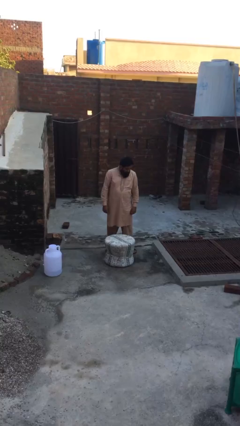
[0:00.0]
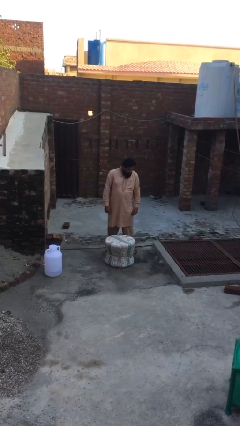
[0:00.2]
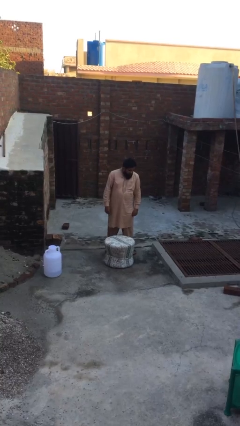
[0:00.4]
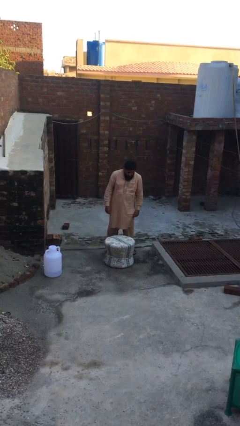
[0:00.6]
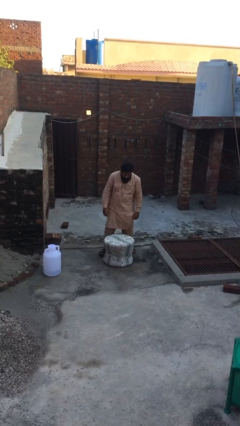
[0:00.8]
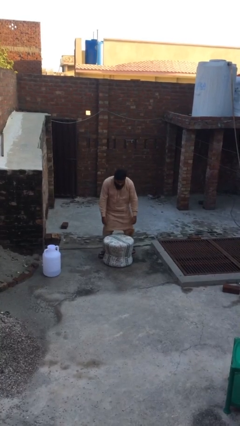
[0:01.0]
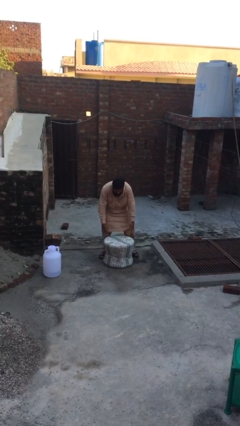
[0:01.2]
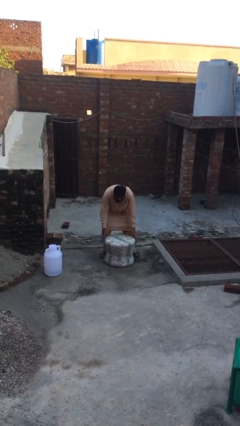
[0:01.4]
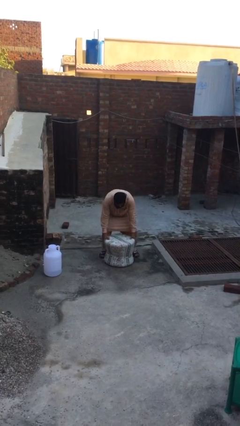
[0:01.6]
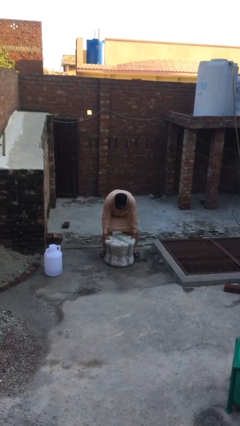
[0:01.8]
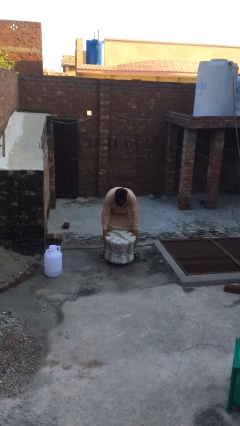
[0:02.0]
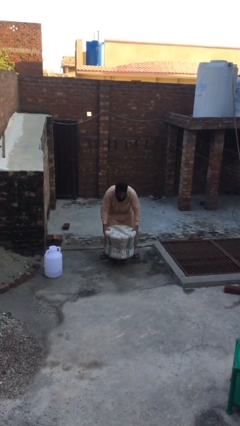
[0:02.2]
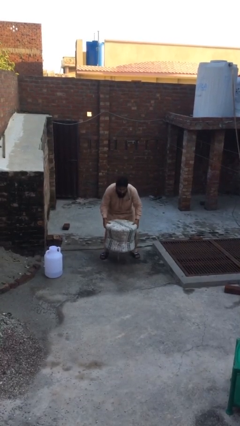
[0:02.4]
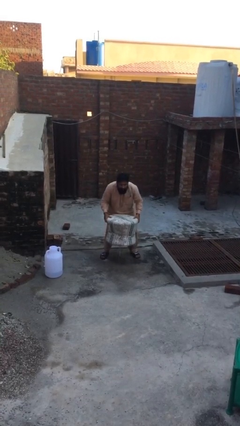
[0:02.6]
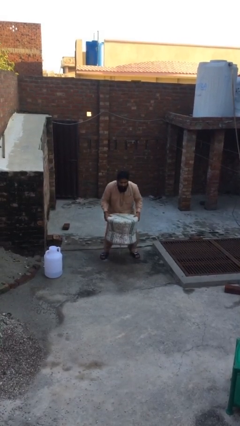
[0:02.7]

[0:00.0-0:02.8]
person picks up object from floor

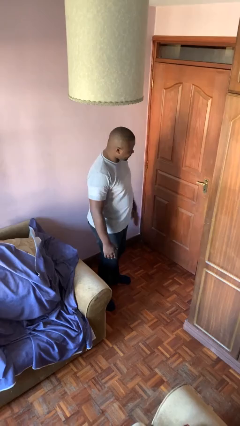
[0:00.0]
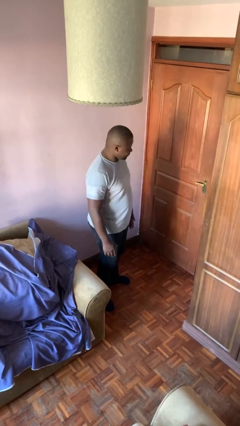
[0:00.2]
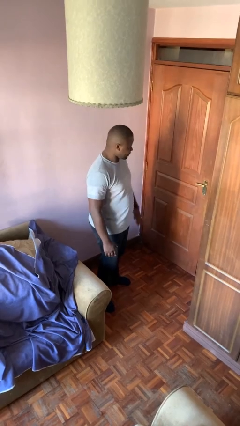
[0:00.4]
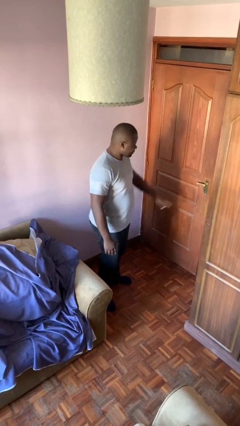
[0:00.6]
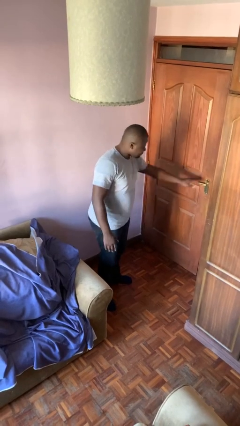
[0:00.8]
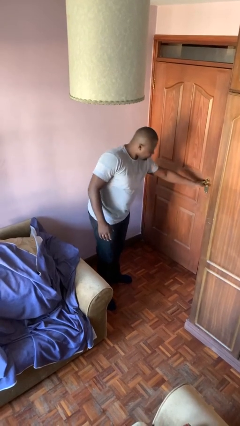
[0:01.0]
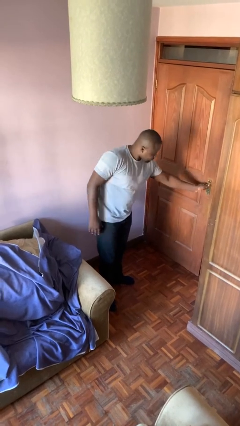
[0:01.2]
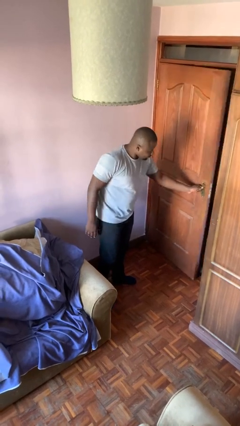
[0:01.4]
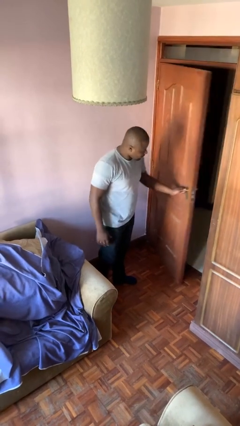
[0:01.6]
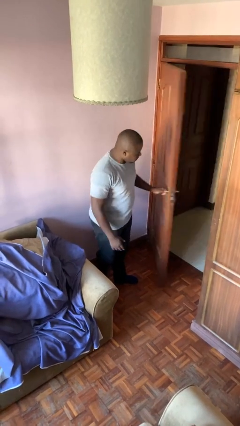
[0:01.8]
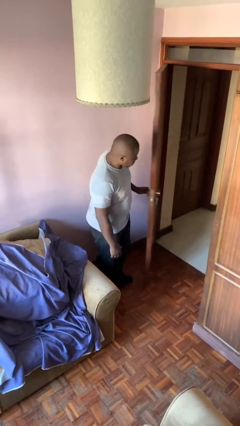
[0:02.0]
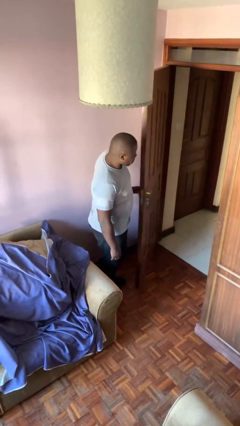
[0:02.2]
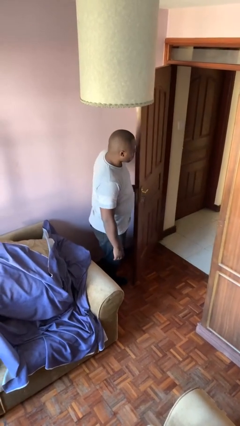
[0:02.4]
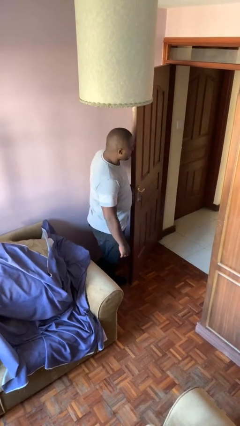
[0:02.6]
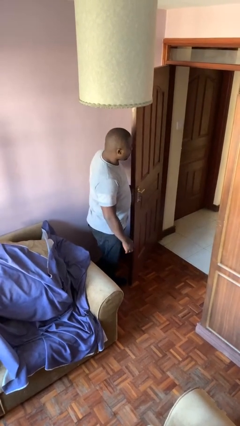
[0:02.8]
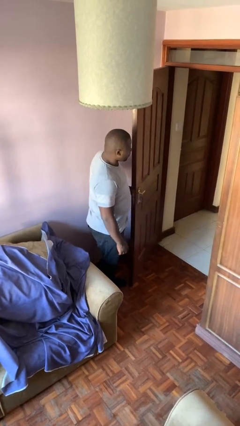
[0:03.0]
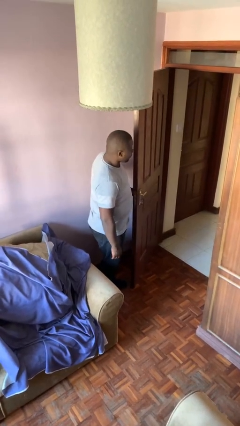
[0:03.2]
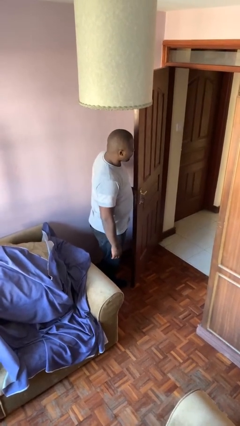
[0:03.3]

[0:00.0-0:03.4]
person opens facility door

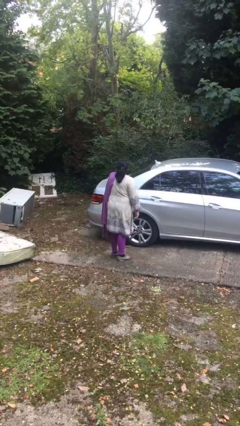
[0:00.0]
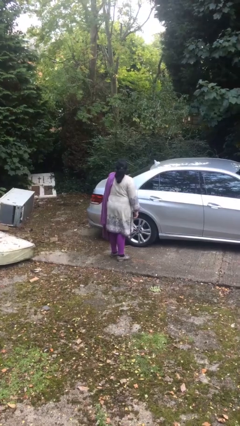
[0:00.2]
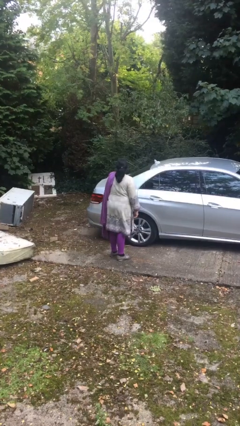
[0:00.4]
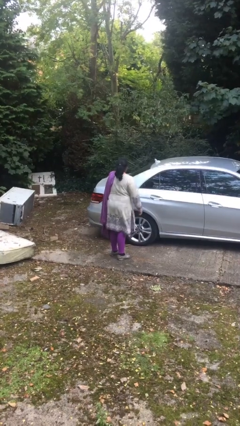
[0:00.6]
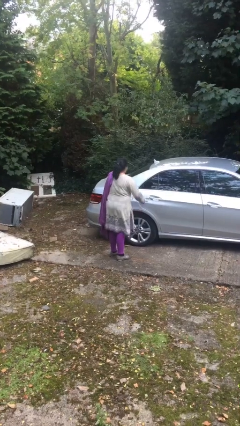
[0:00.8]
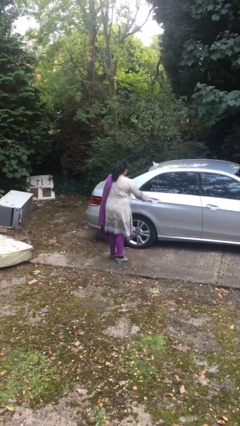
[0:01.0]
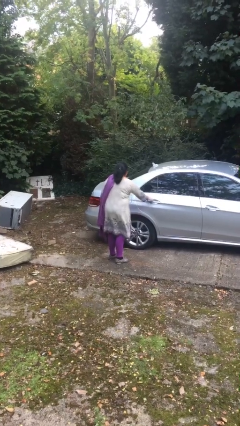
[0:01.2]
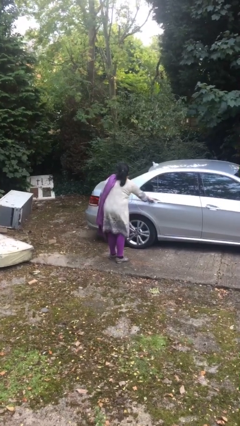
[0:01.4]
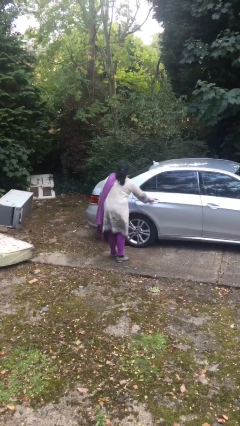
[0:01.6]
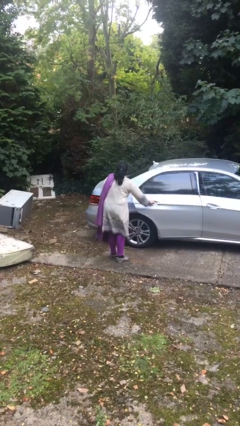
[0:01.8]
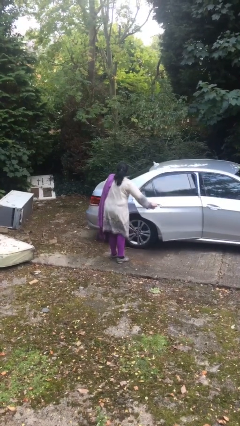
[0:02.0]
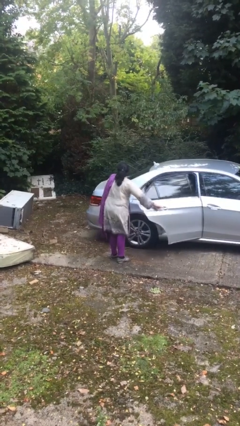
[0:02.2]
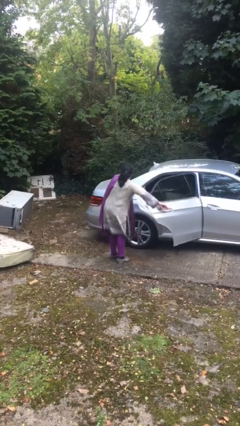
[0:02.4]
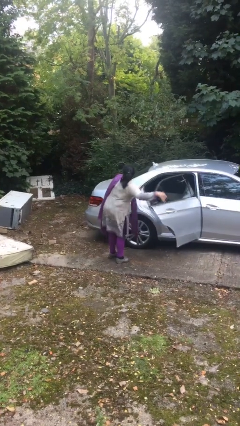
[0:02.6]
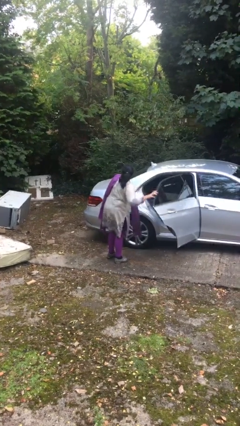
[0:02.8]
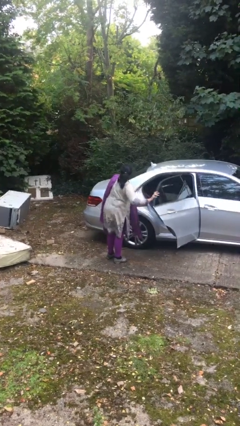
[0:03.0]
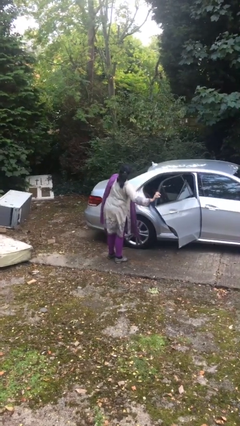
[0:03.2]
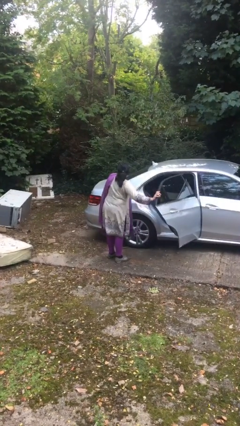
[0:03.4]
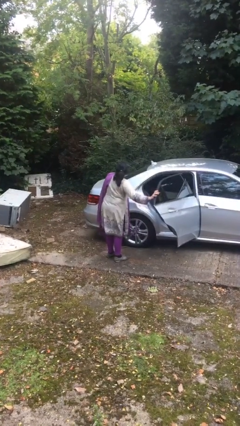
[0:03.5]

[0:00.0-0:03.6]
person opens car door

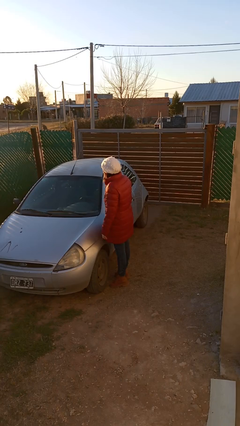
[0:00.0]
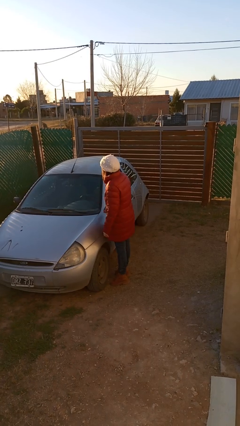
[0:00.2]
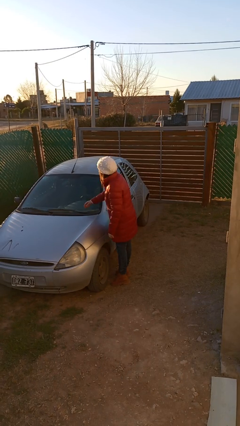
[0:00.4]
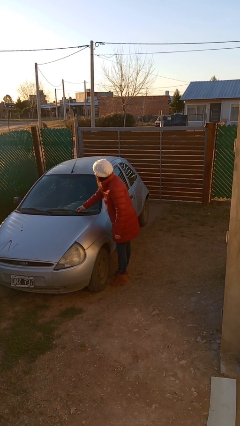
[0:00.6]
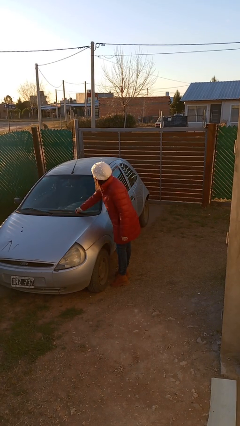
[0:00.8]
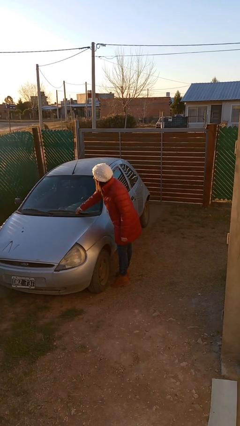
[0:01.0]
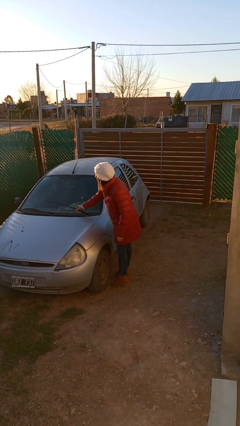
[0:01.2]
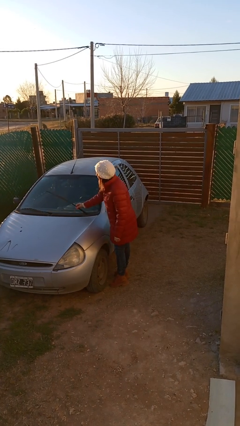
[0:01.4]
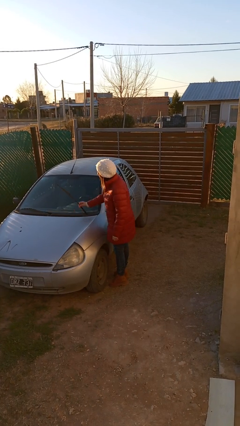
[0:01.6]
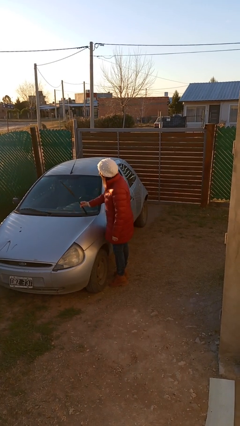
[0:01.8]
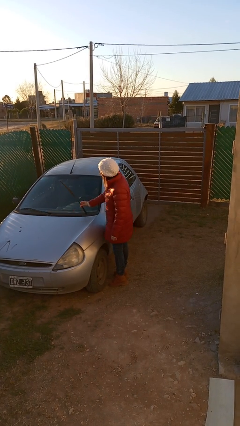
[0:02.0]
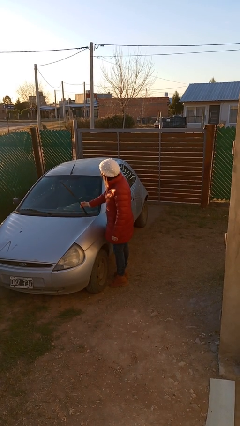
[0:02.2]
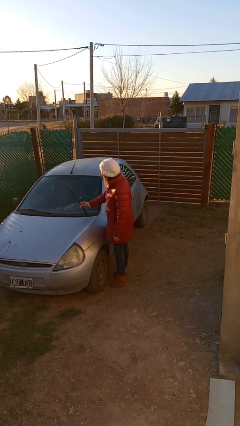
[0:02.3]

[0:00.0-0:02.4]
person flips up car wipers

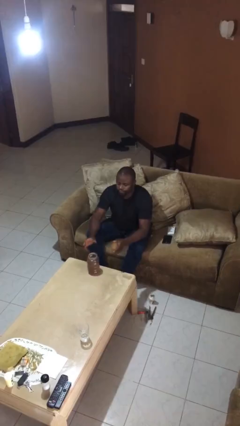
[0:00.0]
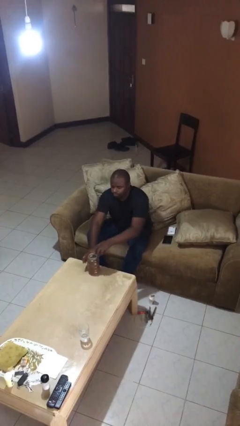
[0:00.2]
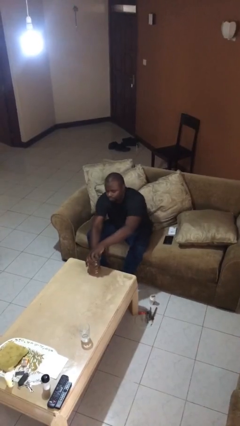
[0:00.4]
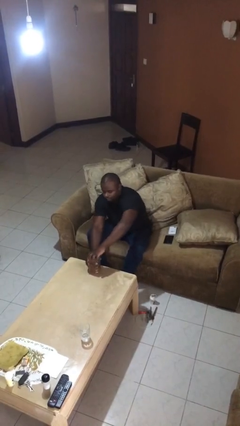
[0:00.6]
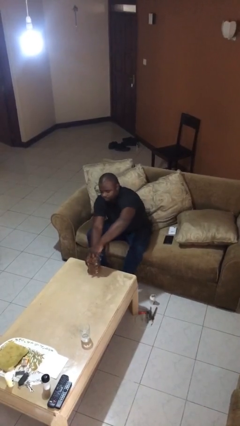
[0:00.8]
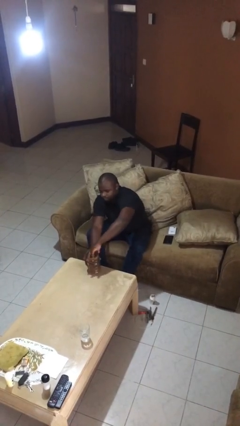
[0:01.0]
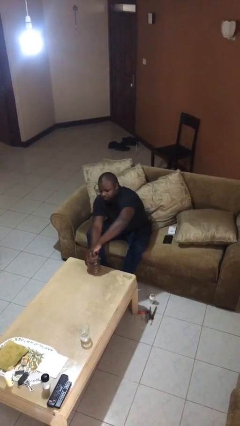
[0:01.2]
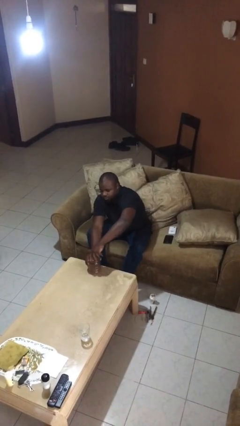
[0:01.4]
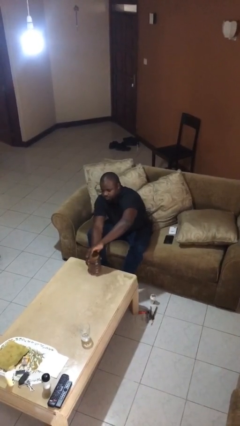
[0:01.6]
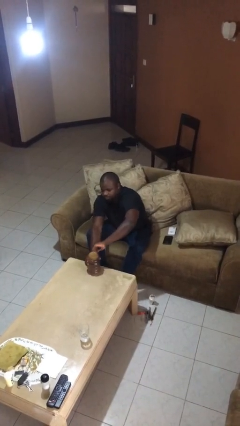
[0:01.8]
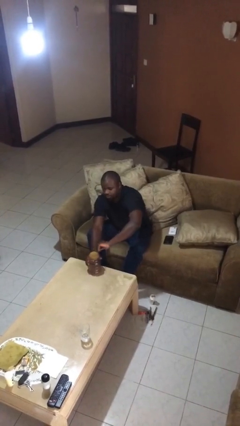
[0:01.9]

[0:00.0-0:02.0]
person closes jar

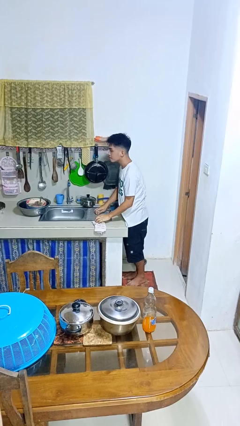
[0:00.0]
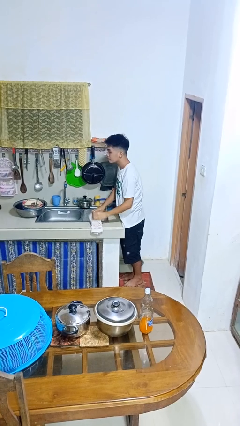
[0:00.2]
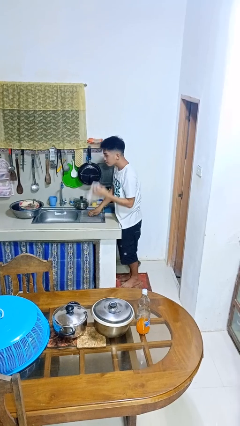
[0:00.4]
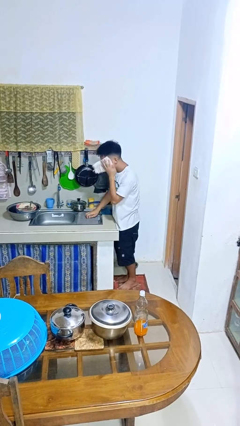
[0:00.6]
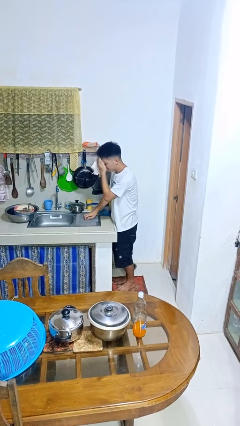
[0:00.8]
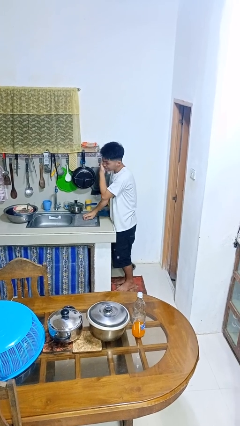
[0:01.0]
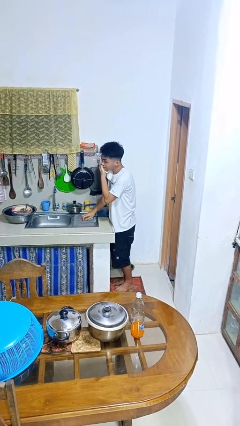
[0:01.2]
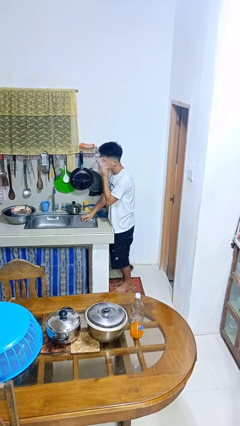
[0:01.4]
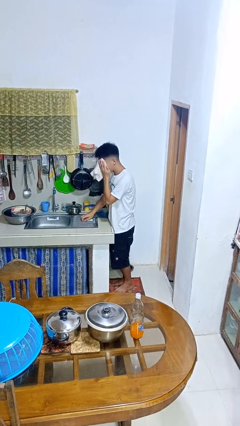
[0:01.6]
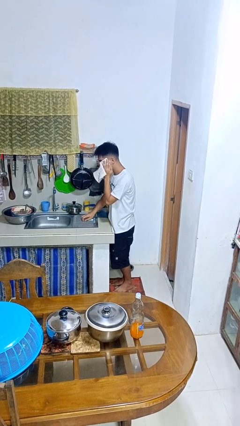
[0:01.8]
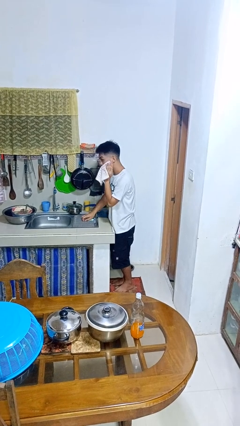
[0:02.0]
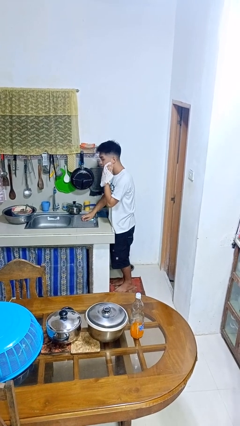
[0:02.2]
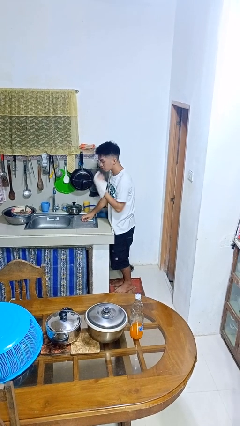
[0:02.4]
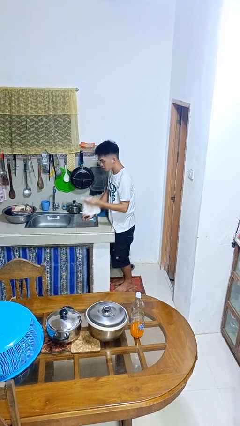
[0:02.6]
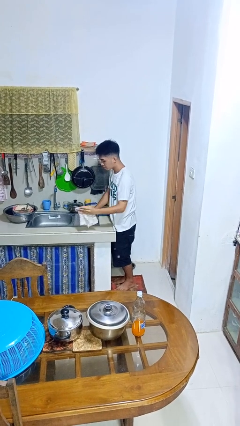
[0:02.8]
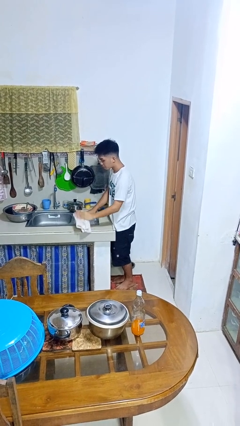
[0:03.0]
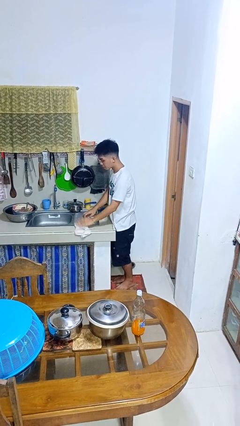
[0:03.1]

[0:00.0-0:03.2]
person dries face with towel

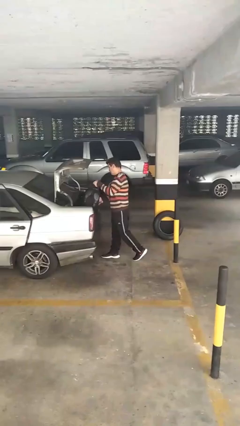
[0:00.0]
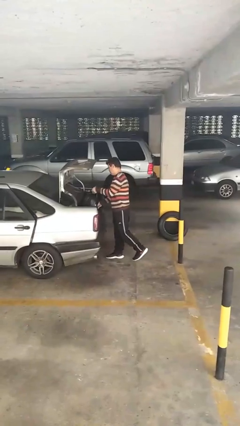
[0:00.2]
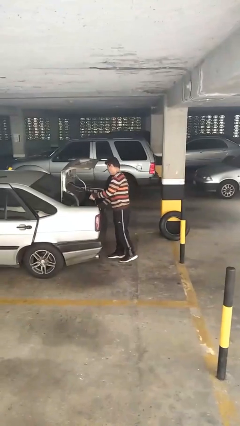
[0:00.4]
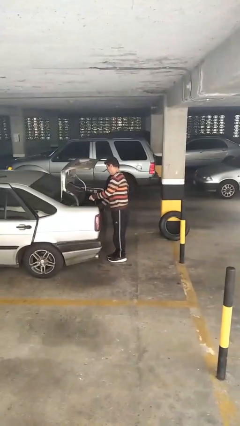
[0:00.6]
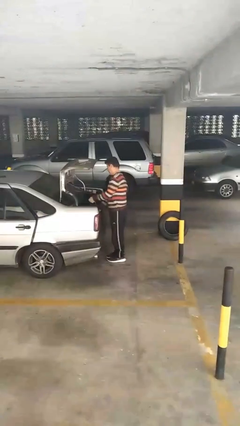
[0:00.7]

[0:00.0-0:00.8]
person loads car
